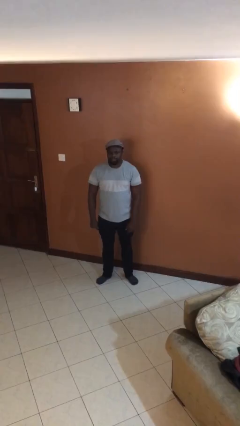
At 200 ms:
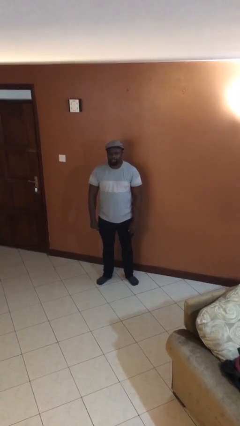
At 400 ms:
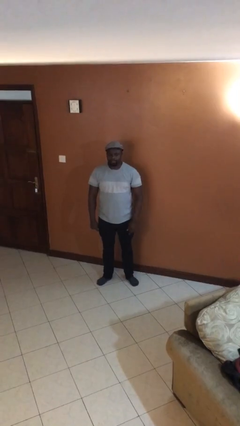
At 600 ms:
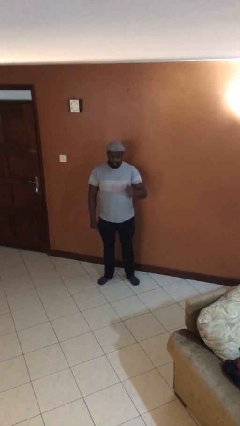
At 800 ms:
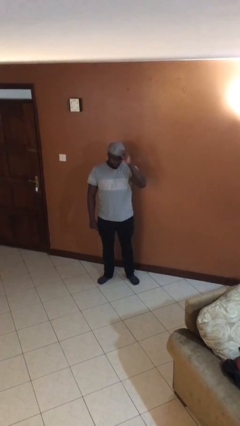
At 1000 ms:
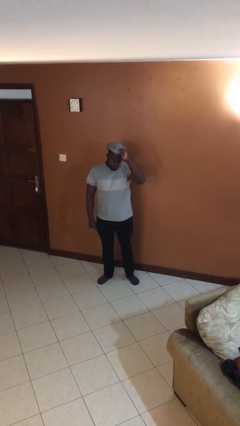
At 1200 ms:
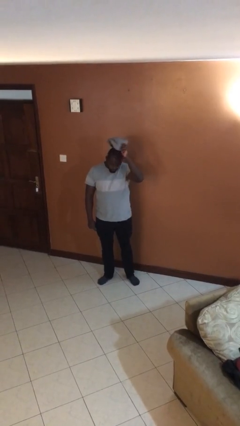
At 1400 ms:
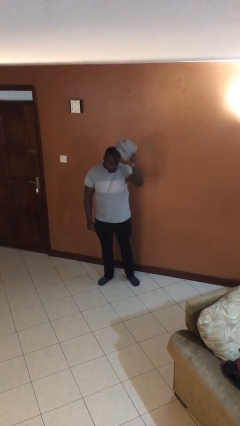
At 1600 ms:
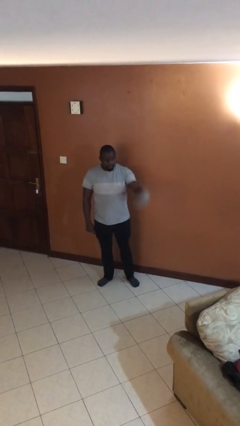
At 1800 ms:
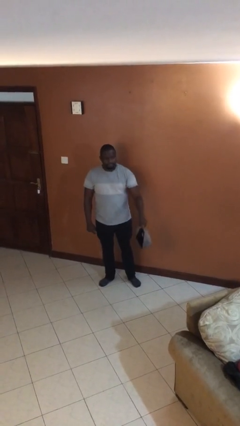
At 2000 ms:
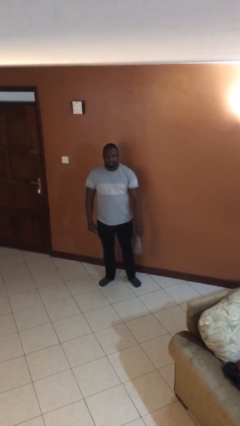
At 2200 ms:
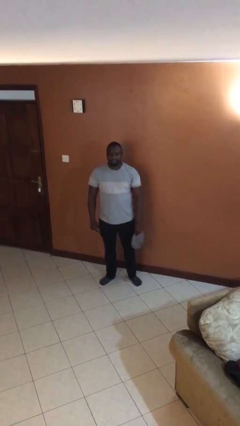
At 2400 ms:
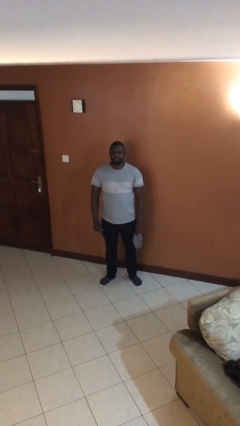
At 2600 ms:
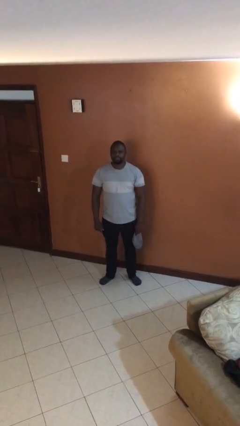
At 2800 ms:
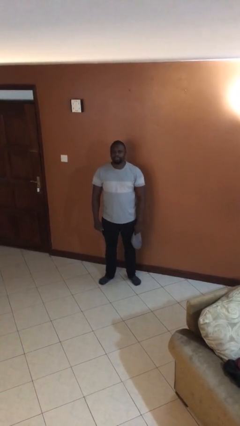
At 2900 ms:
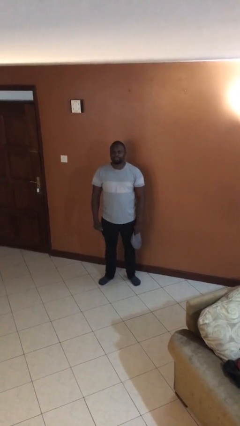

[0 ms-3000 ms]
person takes off hat

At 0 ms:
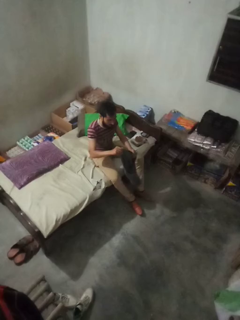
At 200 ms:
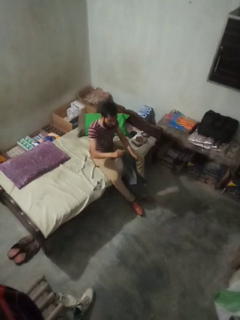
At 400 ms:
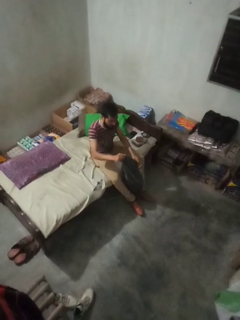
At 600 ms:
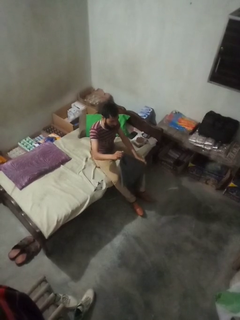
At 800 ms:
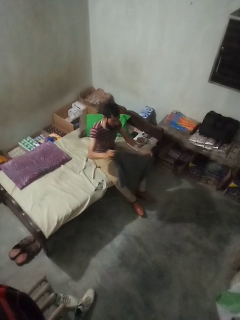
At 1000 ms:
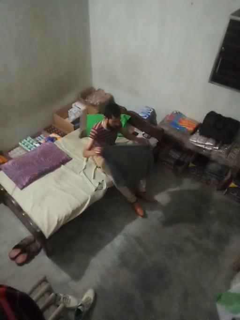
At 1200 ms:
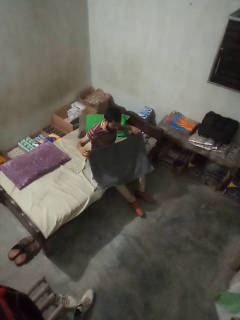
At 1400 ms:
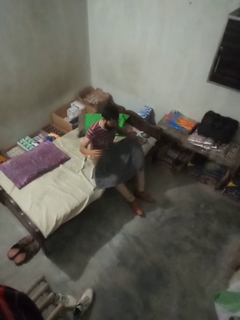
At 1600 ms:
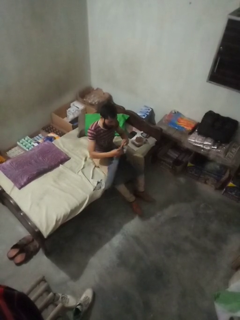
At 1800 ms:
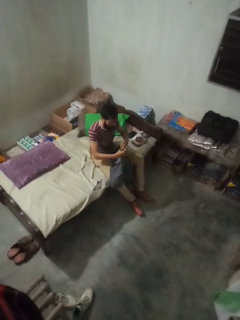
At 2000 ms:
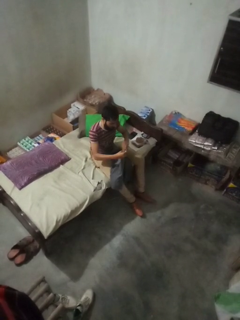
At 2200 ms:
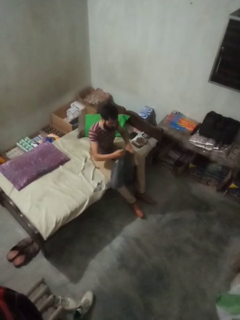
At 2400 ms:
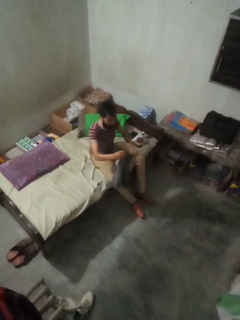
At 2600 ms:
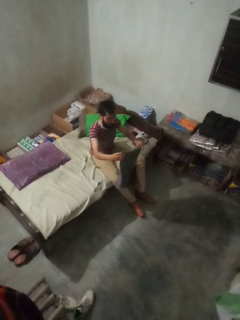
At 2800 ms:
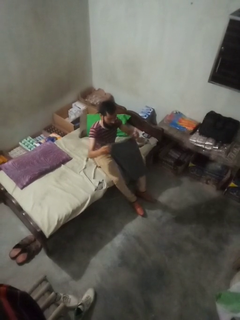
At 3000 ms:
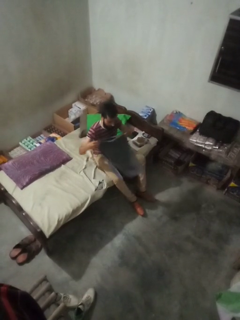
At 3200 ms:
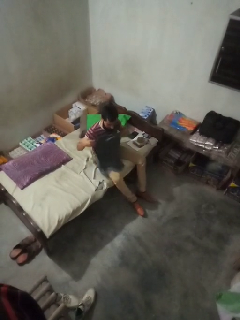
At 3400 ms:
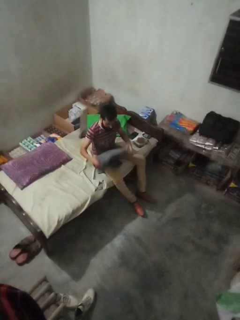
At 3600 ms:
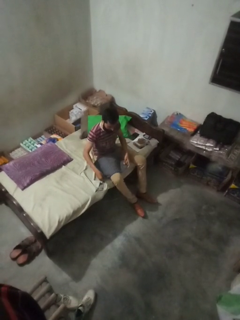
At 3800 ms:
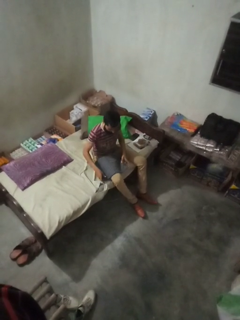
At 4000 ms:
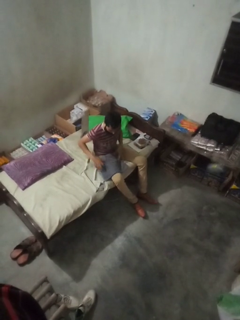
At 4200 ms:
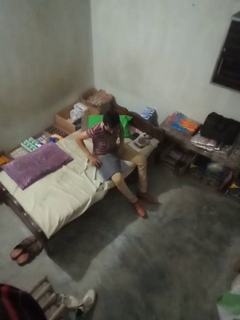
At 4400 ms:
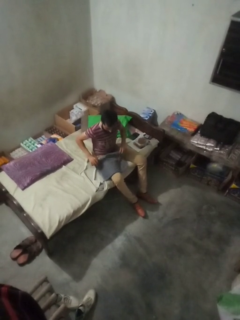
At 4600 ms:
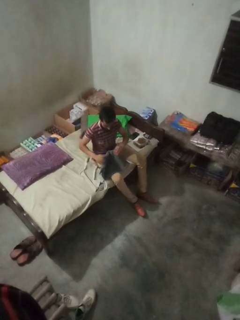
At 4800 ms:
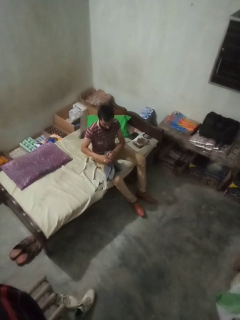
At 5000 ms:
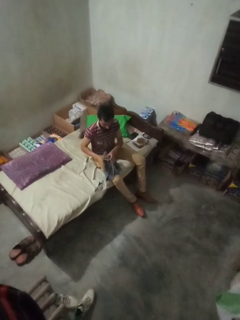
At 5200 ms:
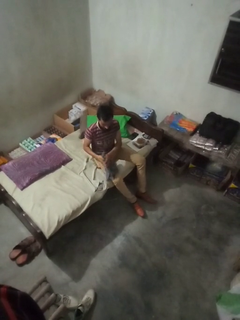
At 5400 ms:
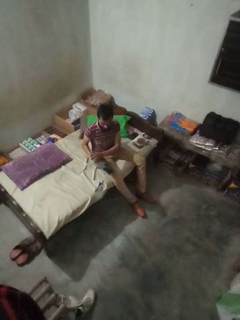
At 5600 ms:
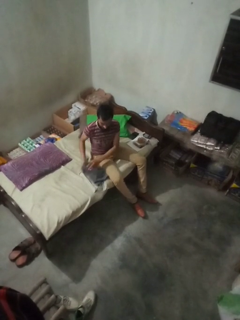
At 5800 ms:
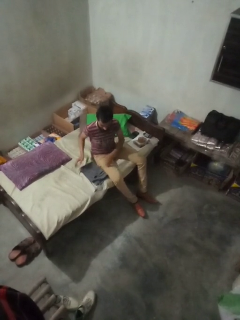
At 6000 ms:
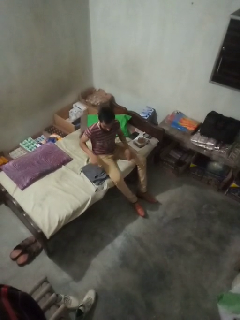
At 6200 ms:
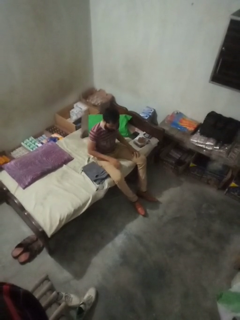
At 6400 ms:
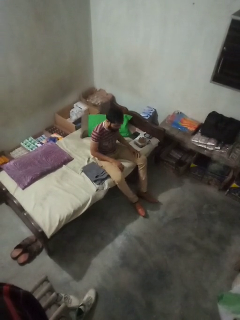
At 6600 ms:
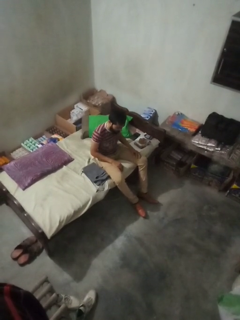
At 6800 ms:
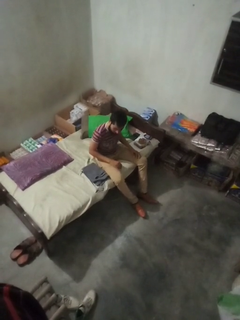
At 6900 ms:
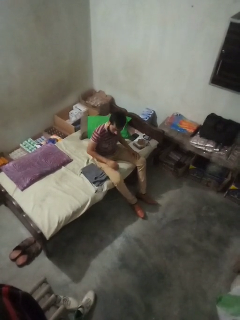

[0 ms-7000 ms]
person folds towel

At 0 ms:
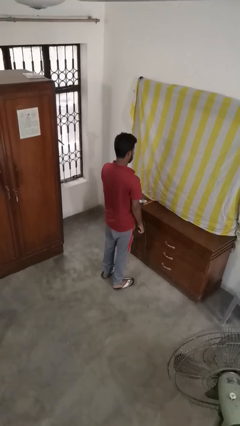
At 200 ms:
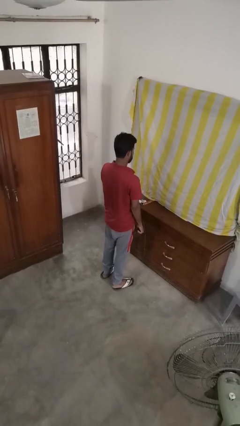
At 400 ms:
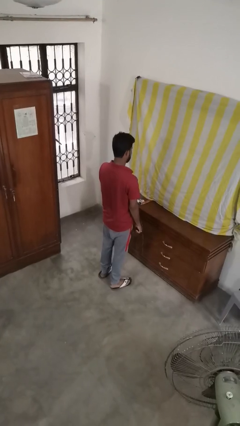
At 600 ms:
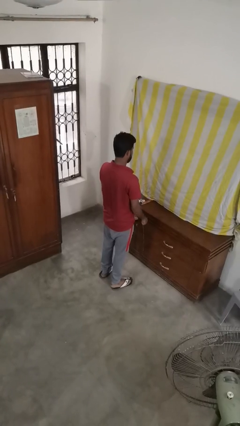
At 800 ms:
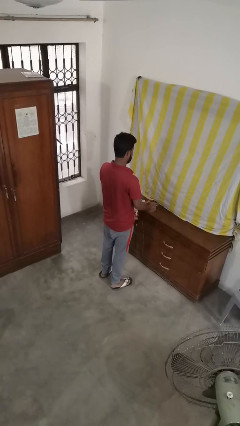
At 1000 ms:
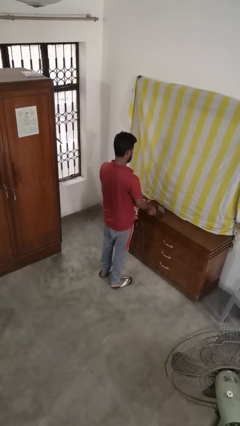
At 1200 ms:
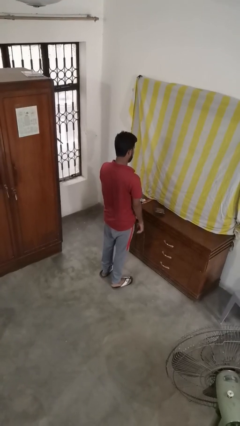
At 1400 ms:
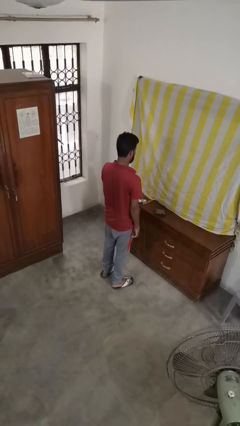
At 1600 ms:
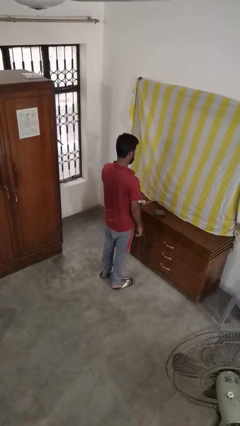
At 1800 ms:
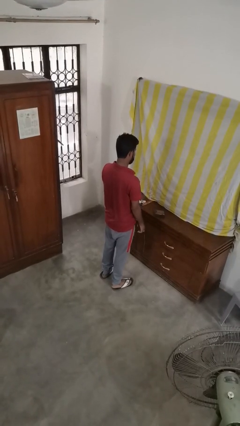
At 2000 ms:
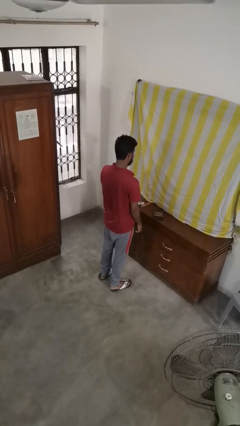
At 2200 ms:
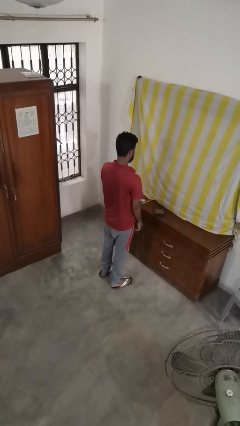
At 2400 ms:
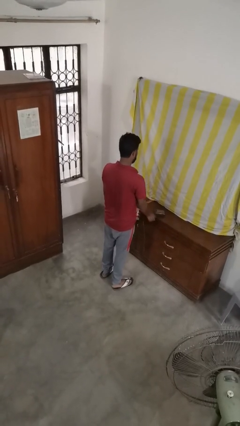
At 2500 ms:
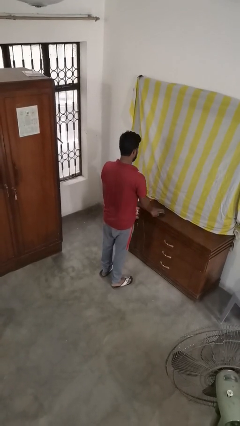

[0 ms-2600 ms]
person throws object on table

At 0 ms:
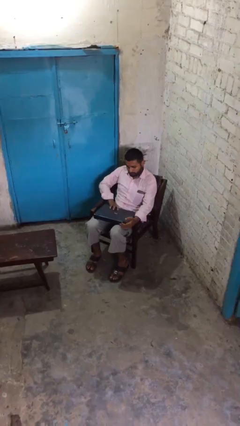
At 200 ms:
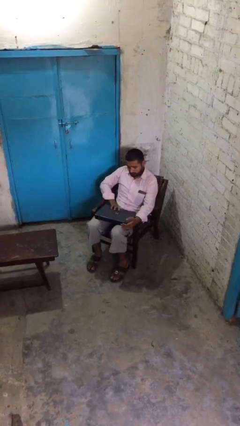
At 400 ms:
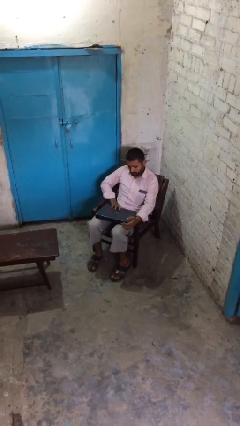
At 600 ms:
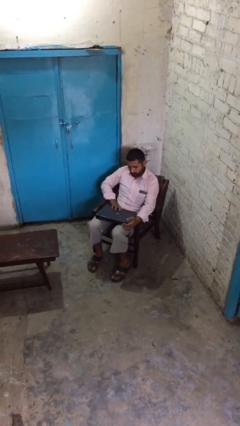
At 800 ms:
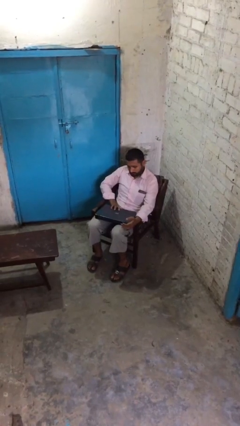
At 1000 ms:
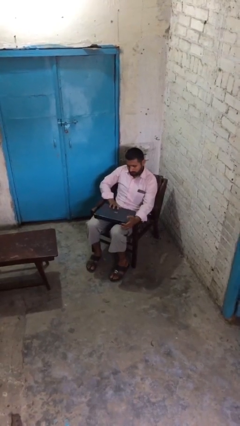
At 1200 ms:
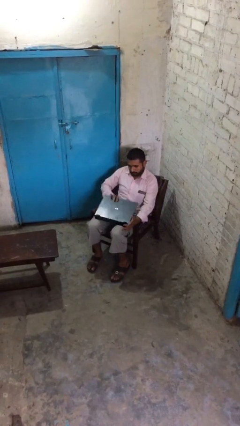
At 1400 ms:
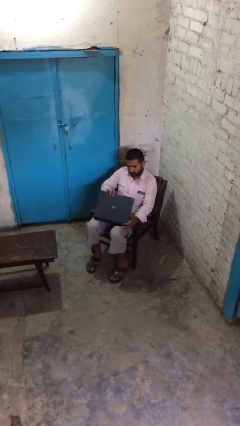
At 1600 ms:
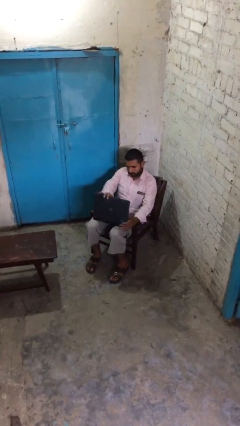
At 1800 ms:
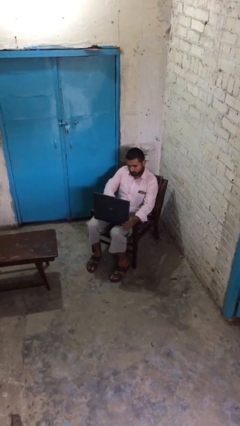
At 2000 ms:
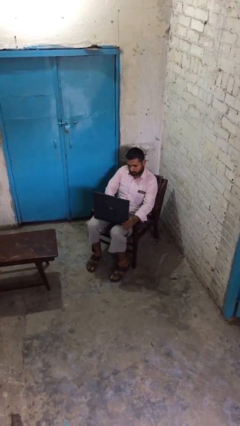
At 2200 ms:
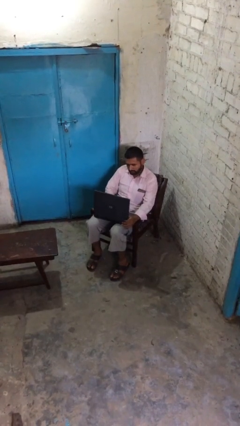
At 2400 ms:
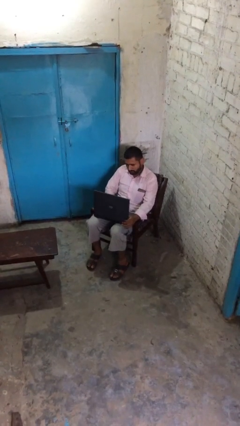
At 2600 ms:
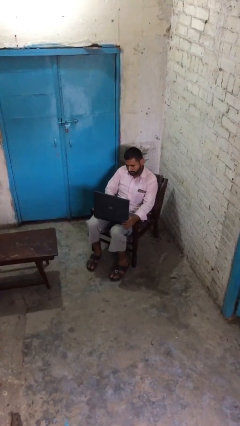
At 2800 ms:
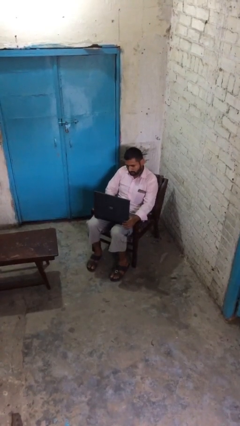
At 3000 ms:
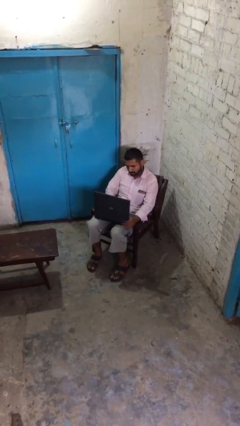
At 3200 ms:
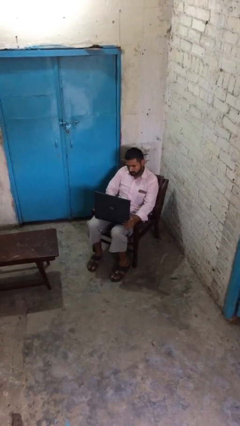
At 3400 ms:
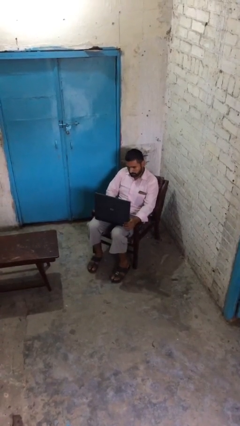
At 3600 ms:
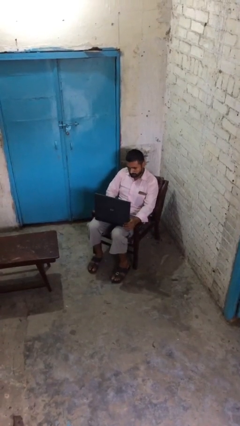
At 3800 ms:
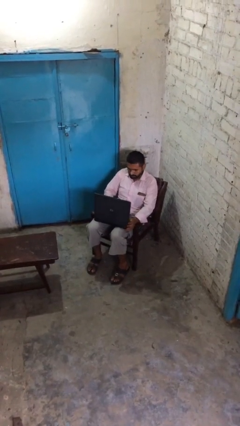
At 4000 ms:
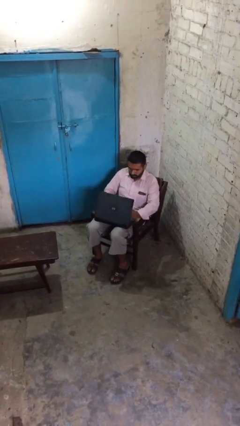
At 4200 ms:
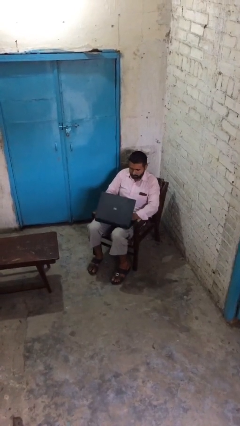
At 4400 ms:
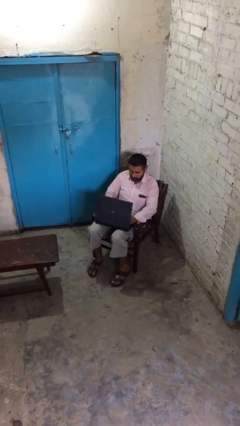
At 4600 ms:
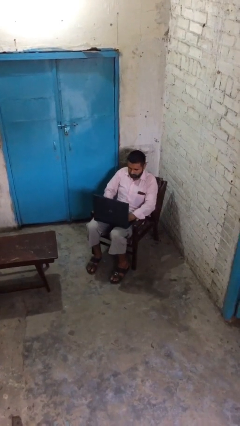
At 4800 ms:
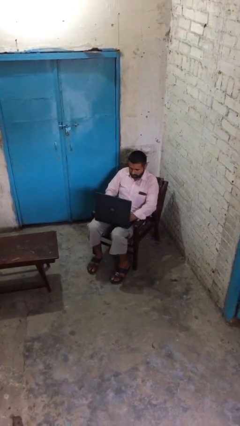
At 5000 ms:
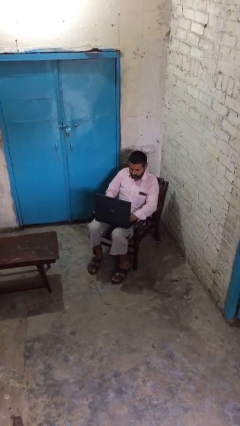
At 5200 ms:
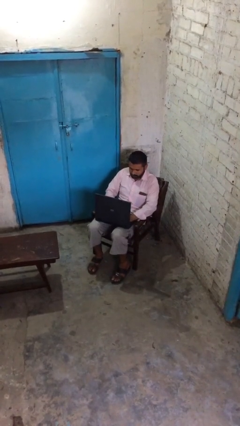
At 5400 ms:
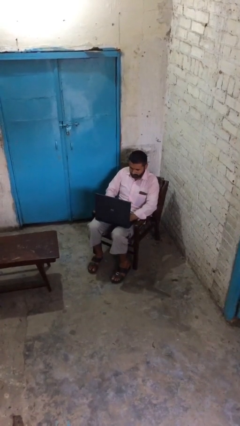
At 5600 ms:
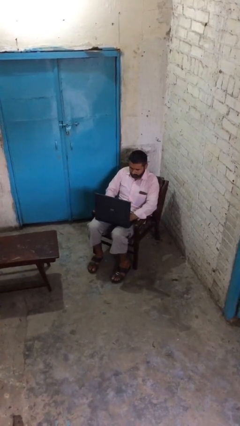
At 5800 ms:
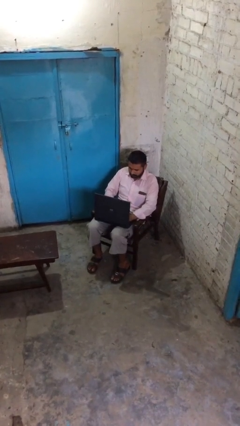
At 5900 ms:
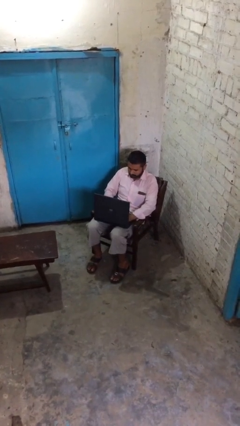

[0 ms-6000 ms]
person interacts with laptop

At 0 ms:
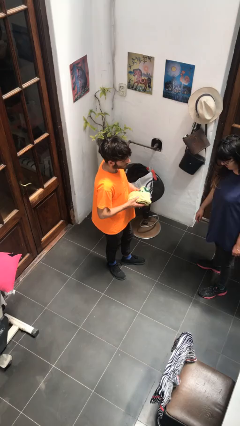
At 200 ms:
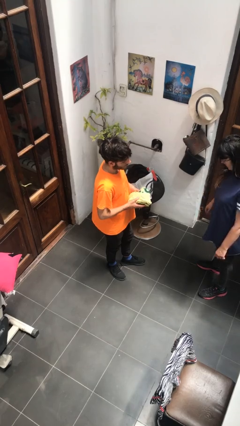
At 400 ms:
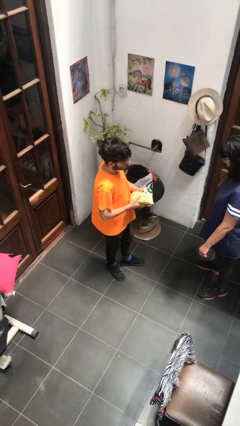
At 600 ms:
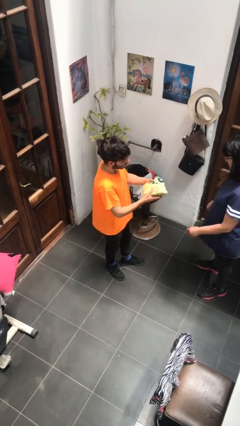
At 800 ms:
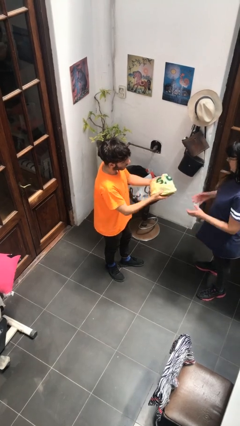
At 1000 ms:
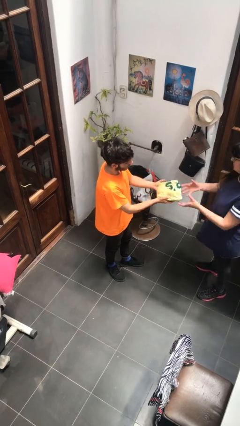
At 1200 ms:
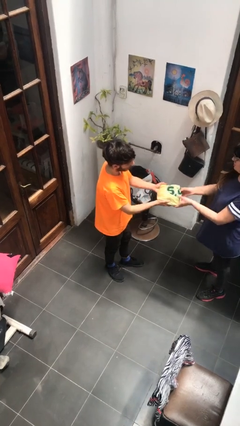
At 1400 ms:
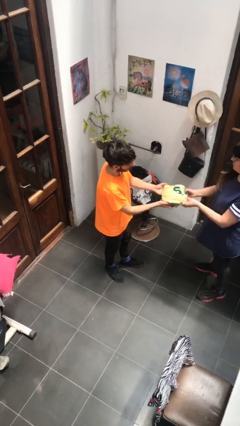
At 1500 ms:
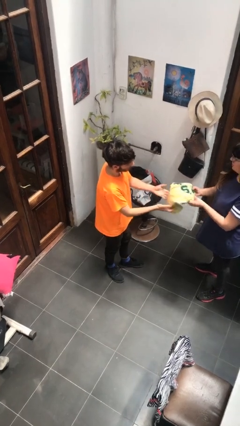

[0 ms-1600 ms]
person transfers object to person
